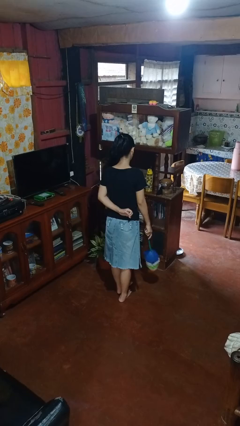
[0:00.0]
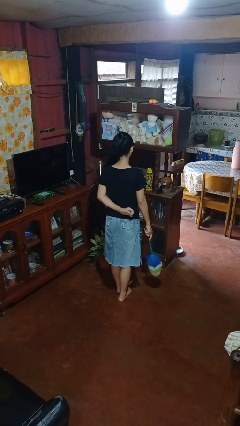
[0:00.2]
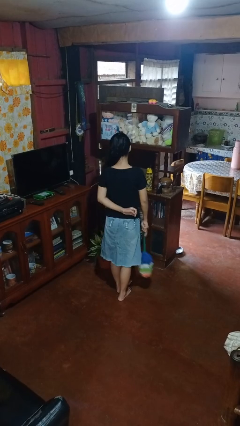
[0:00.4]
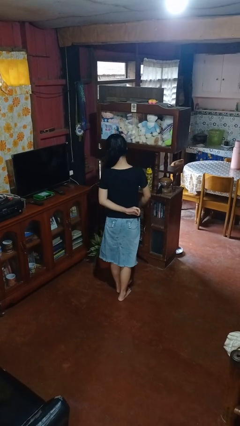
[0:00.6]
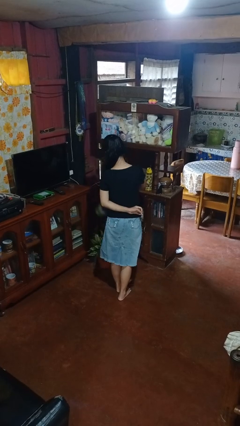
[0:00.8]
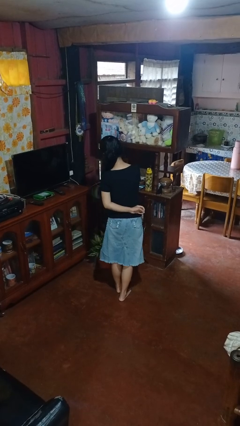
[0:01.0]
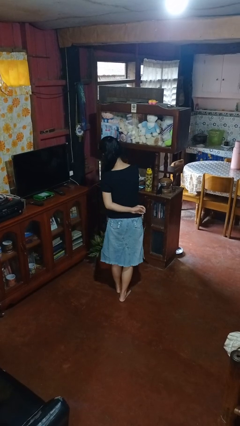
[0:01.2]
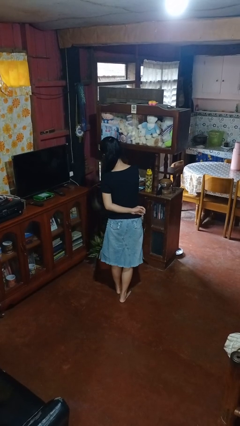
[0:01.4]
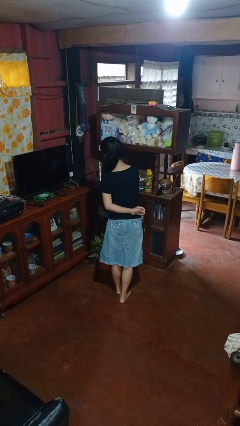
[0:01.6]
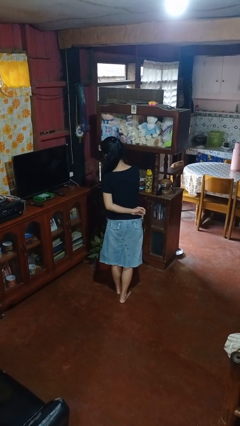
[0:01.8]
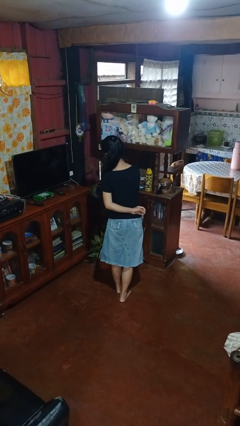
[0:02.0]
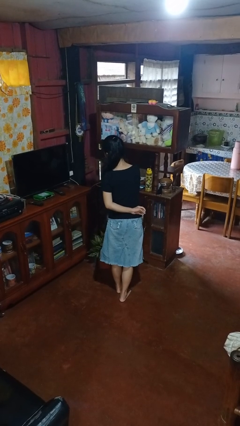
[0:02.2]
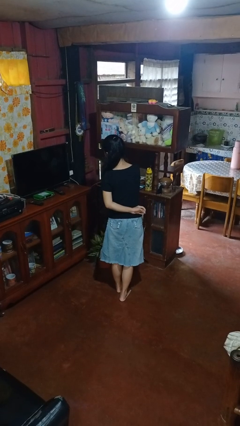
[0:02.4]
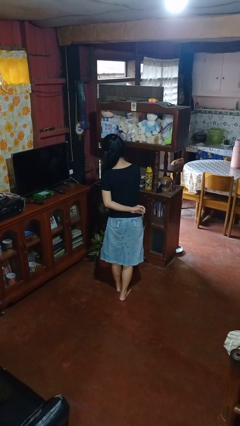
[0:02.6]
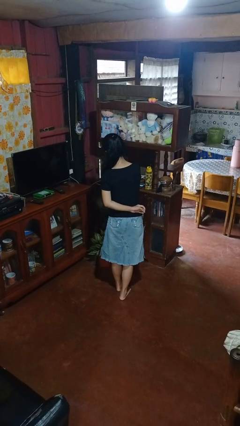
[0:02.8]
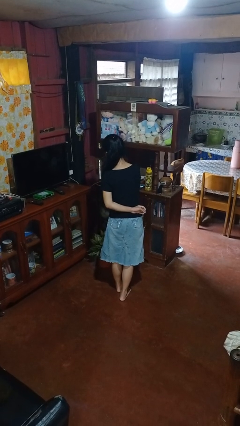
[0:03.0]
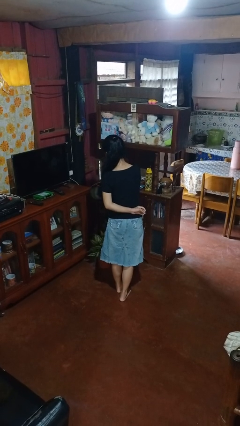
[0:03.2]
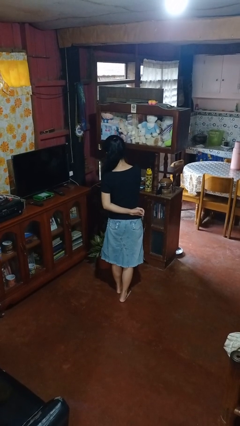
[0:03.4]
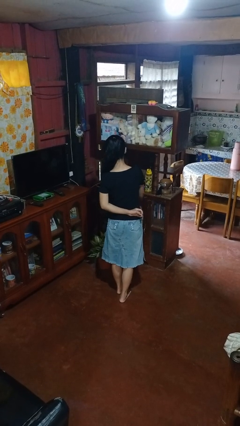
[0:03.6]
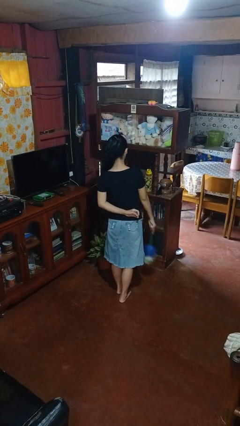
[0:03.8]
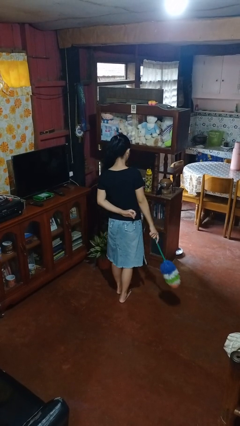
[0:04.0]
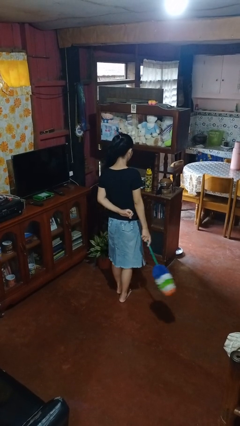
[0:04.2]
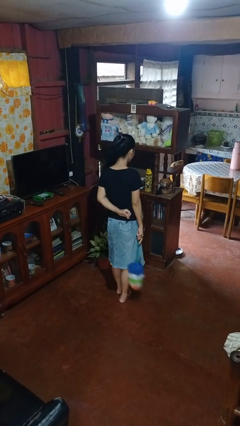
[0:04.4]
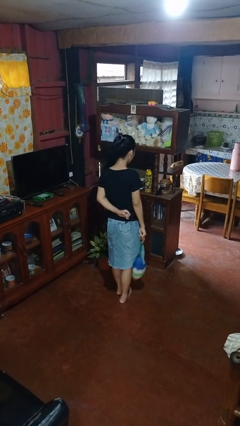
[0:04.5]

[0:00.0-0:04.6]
person dusts furniture

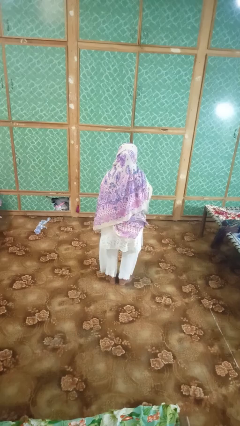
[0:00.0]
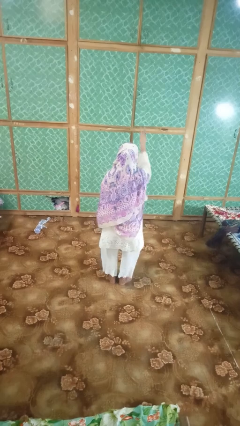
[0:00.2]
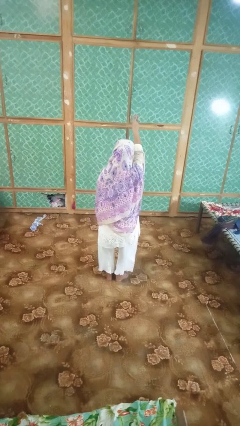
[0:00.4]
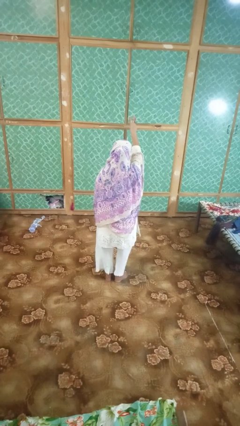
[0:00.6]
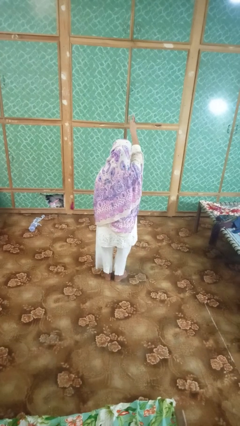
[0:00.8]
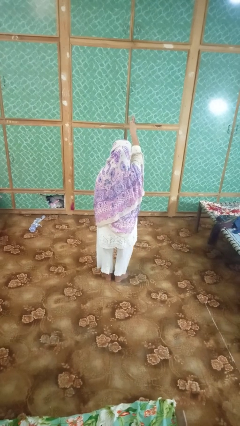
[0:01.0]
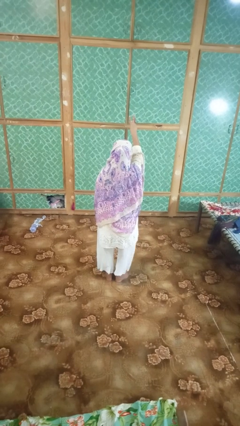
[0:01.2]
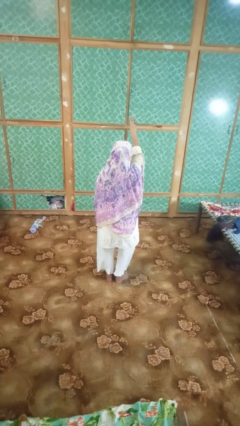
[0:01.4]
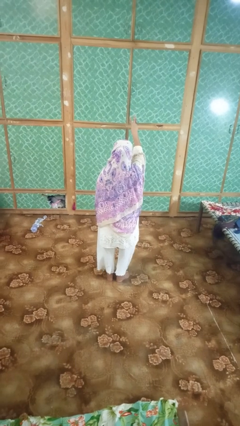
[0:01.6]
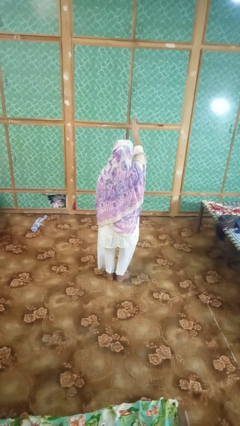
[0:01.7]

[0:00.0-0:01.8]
person gestures number three

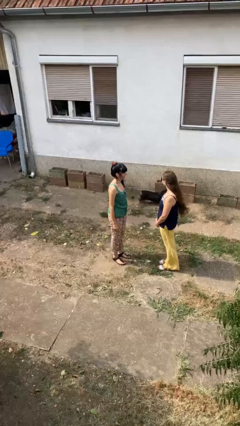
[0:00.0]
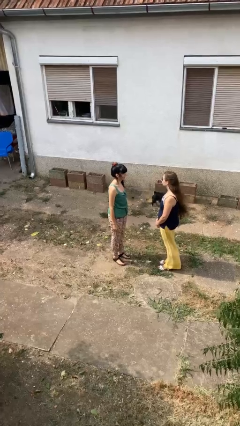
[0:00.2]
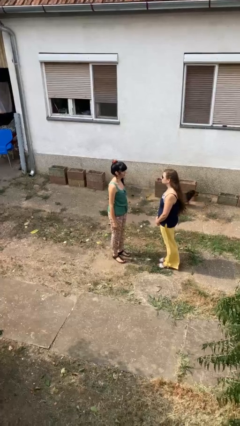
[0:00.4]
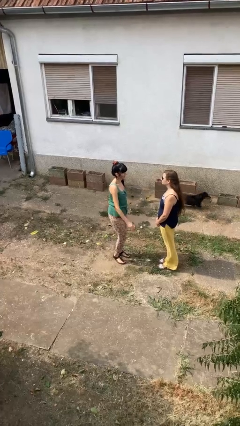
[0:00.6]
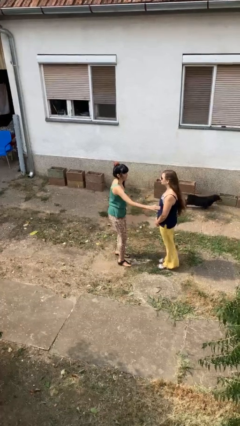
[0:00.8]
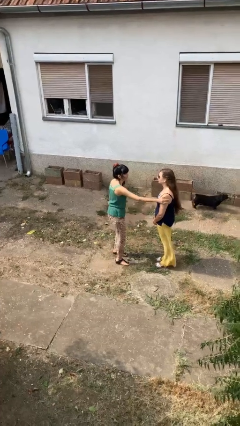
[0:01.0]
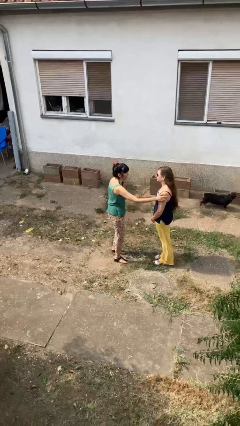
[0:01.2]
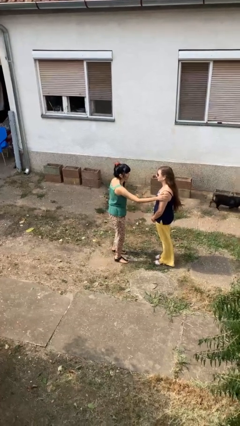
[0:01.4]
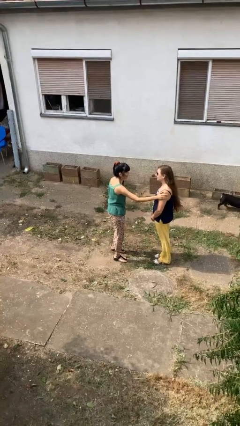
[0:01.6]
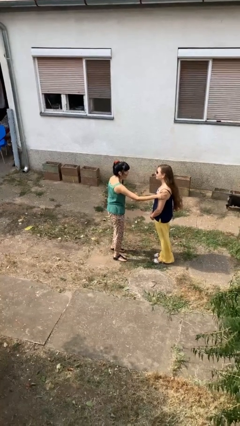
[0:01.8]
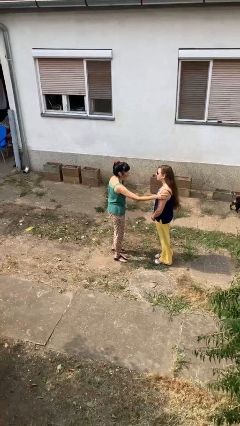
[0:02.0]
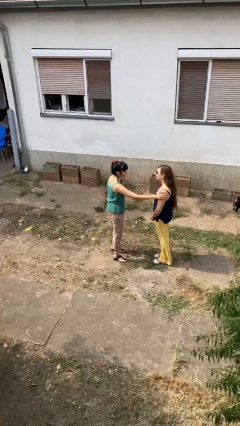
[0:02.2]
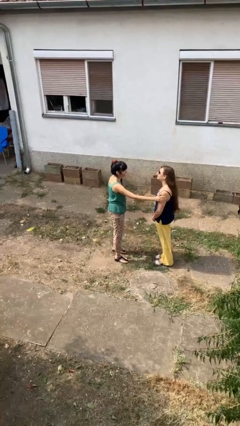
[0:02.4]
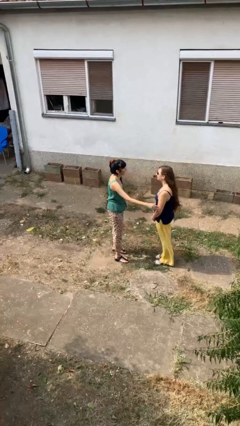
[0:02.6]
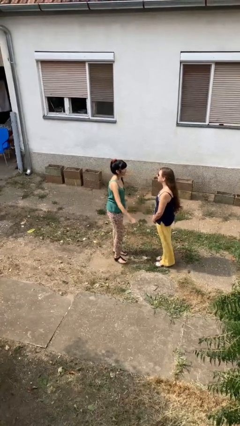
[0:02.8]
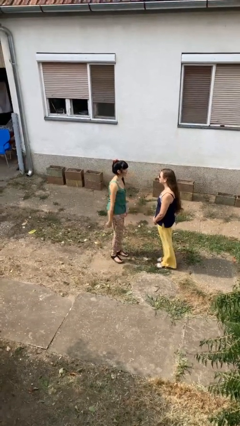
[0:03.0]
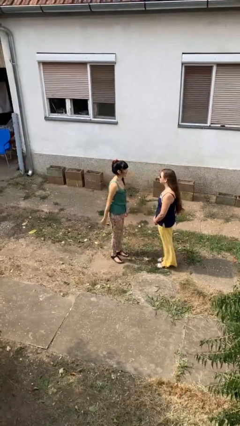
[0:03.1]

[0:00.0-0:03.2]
person pounds shoulders of person

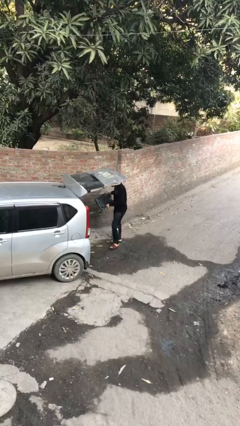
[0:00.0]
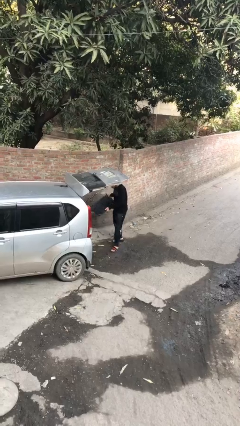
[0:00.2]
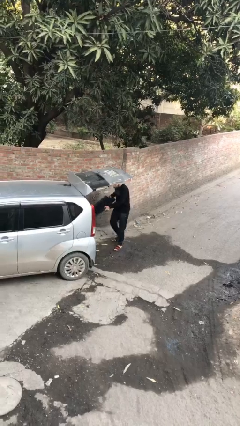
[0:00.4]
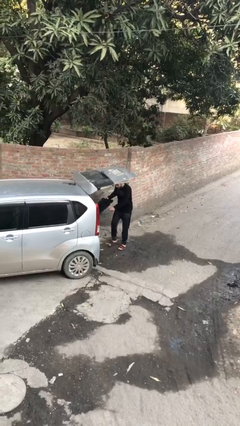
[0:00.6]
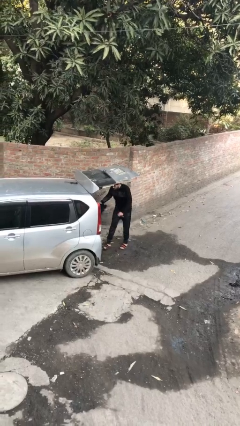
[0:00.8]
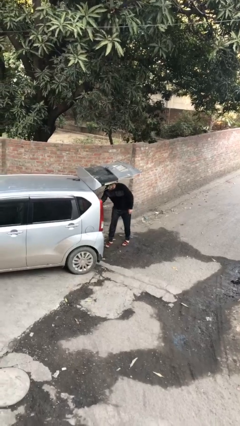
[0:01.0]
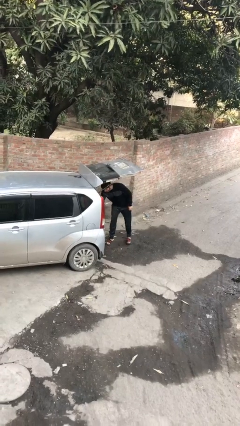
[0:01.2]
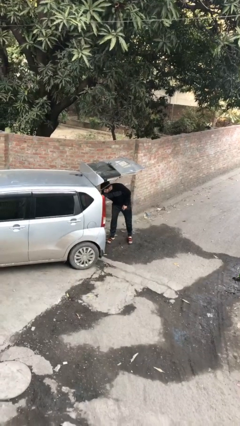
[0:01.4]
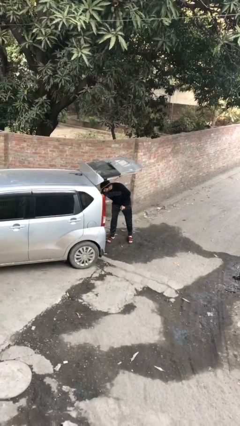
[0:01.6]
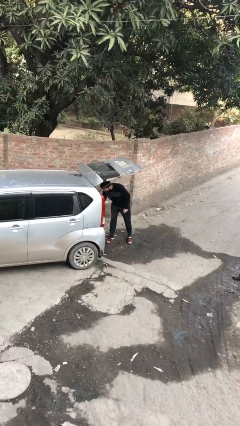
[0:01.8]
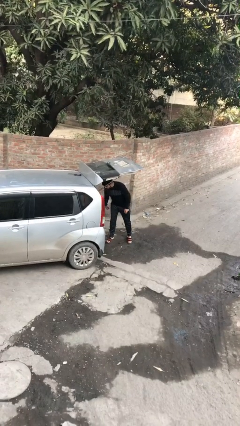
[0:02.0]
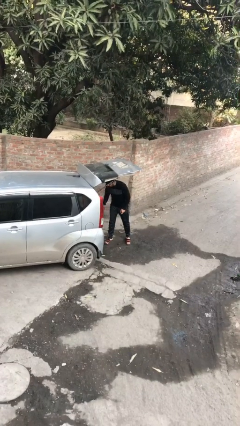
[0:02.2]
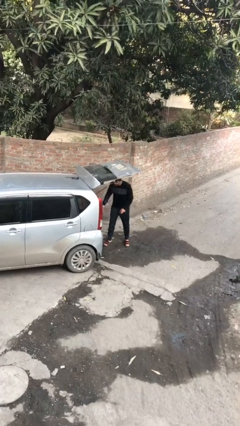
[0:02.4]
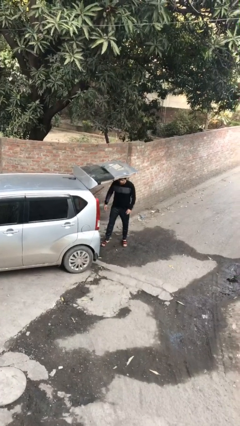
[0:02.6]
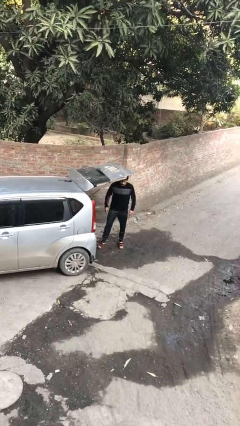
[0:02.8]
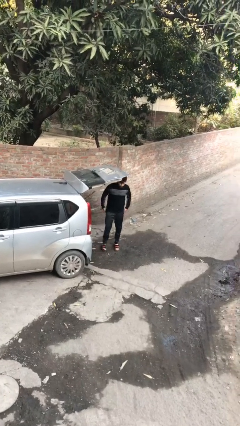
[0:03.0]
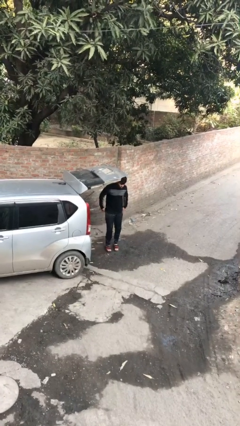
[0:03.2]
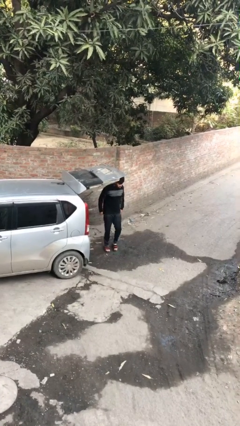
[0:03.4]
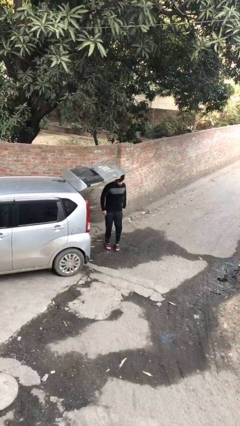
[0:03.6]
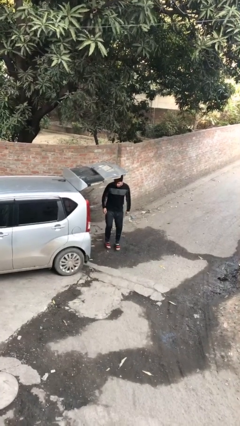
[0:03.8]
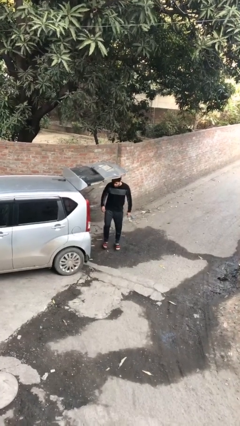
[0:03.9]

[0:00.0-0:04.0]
person loads car

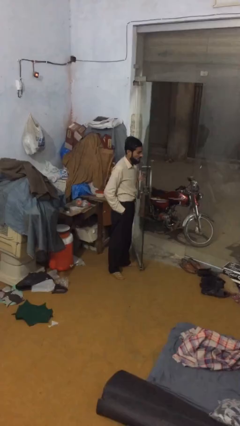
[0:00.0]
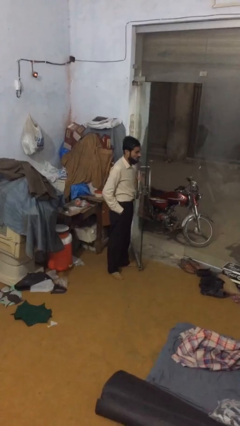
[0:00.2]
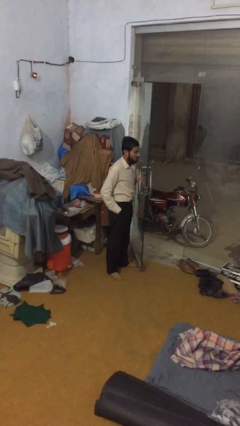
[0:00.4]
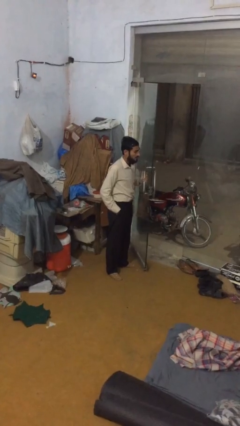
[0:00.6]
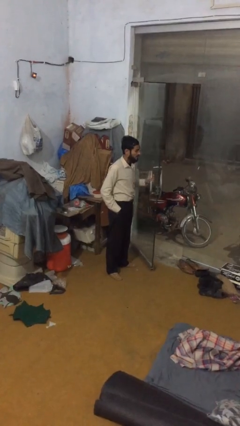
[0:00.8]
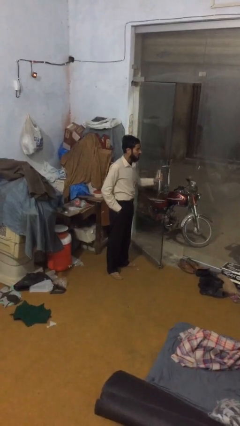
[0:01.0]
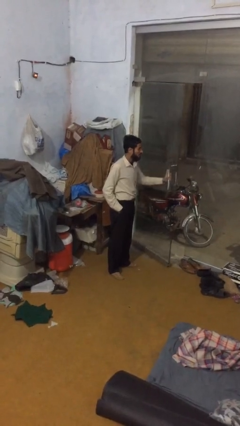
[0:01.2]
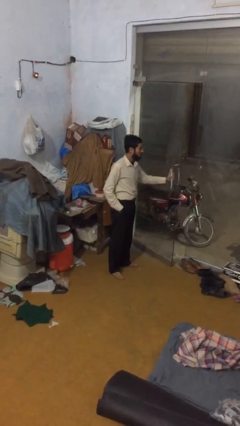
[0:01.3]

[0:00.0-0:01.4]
person closes facility door

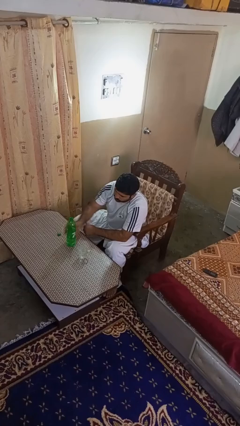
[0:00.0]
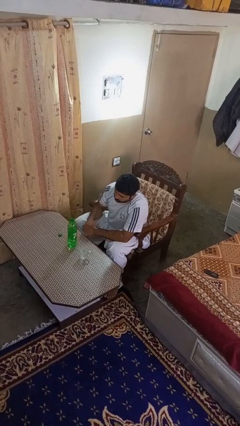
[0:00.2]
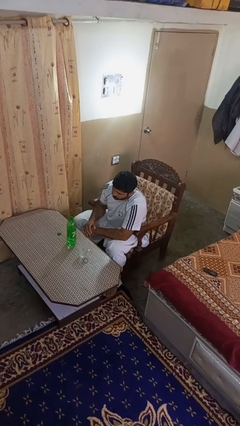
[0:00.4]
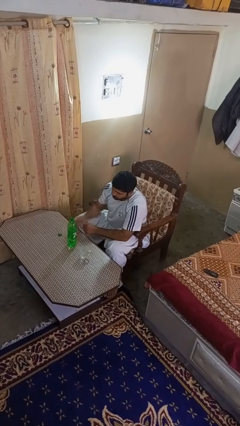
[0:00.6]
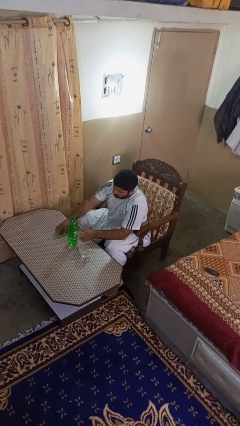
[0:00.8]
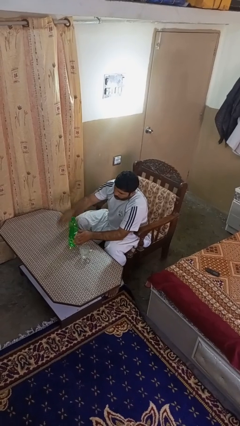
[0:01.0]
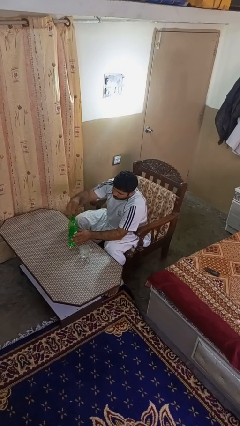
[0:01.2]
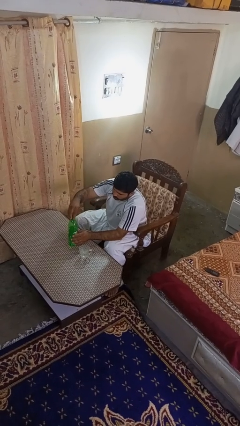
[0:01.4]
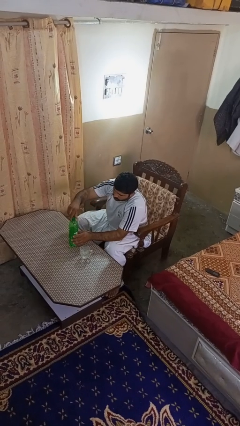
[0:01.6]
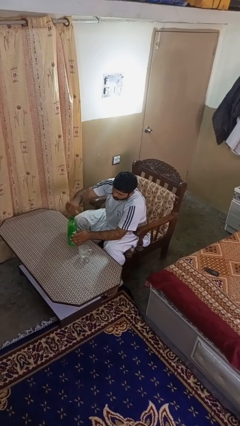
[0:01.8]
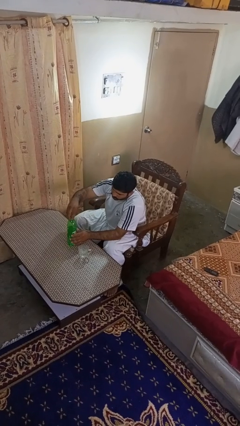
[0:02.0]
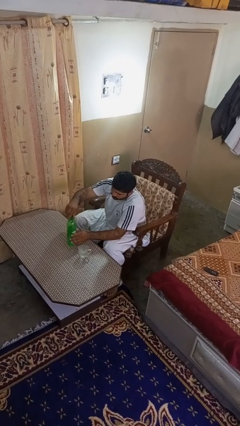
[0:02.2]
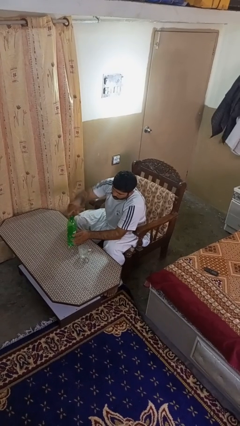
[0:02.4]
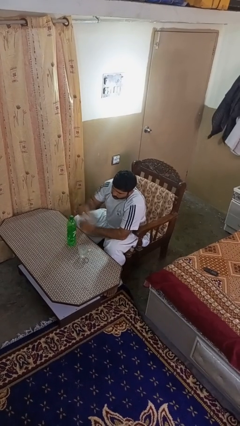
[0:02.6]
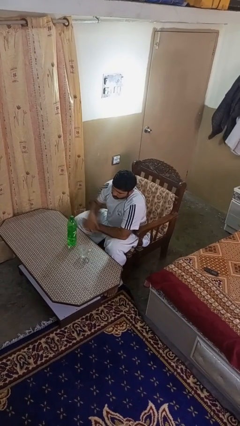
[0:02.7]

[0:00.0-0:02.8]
person screws lid to bottle
